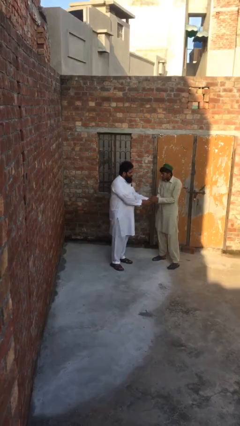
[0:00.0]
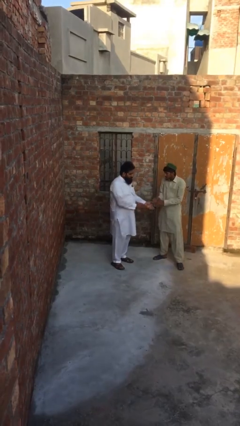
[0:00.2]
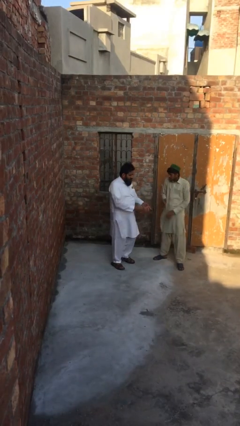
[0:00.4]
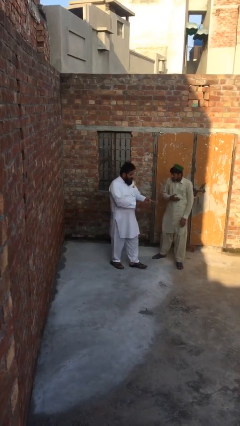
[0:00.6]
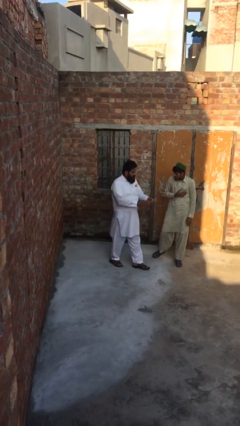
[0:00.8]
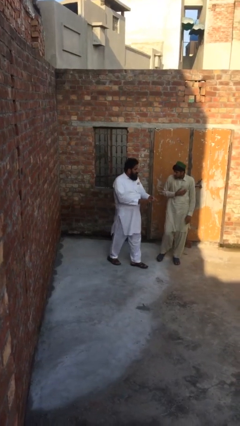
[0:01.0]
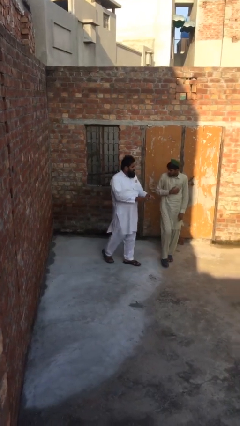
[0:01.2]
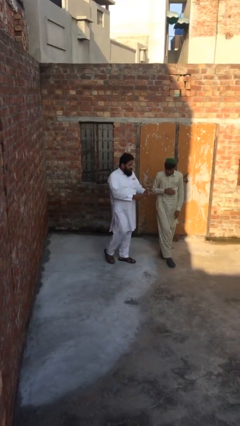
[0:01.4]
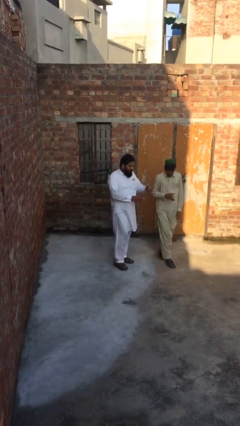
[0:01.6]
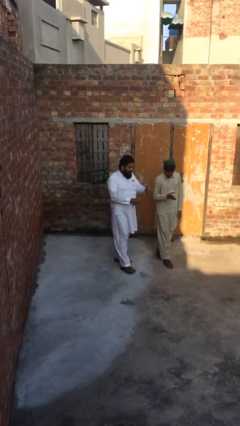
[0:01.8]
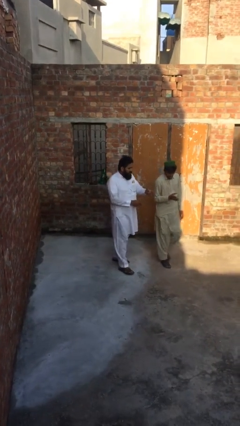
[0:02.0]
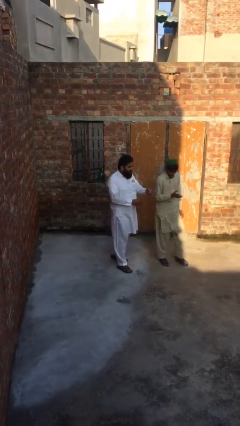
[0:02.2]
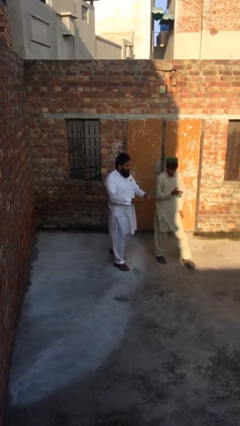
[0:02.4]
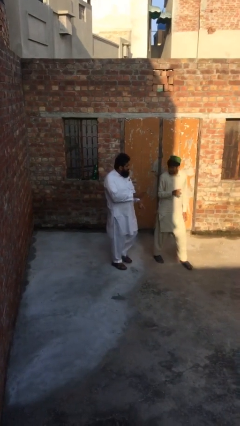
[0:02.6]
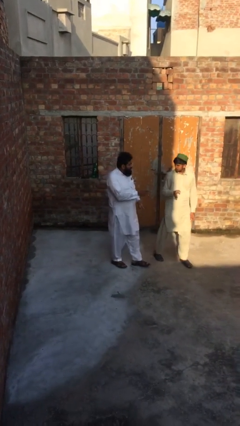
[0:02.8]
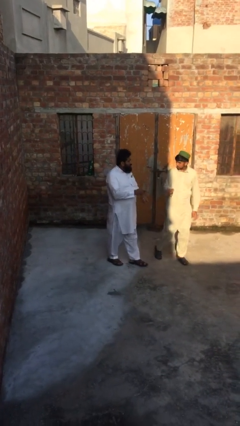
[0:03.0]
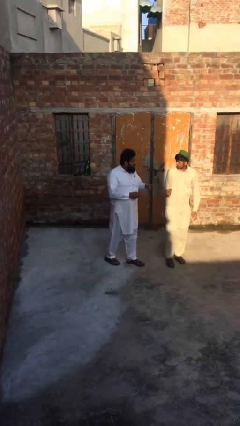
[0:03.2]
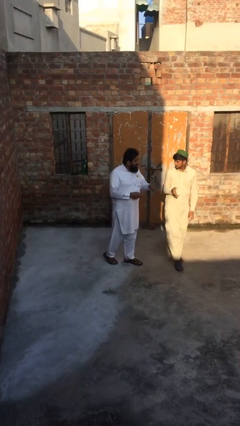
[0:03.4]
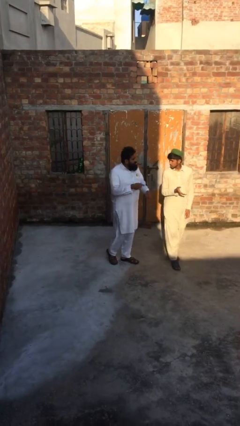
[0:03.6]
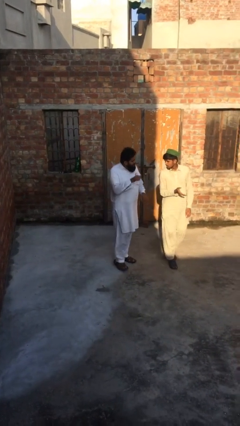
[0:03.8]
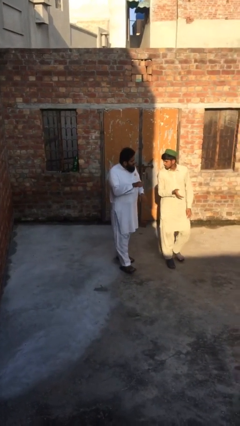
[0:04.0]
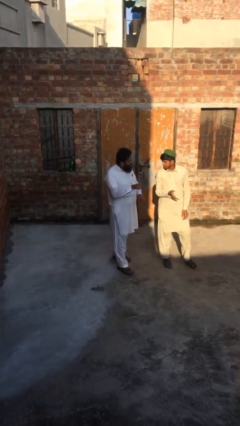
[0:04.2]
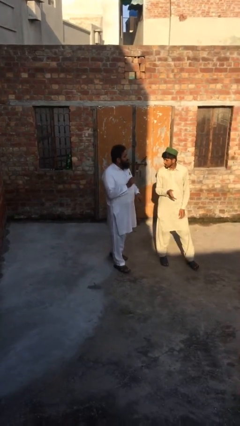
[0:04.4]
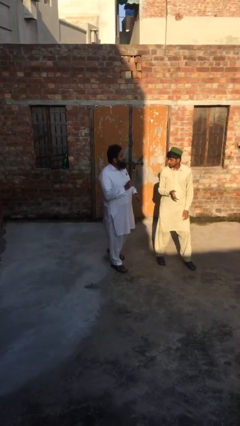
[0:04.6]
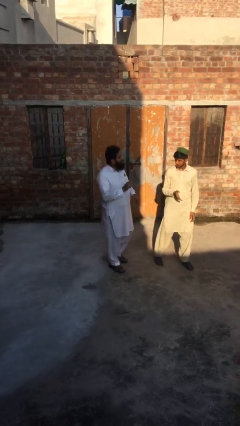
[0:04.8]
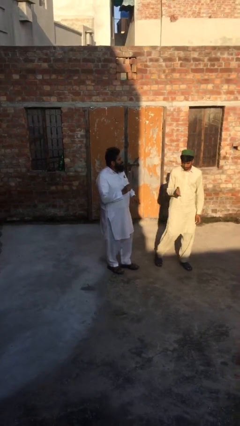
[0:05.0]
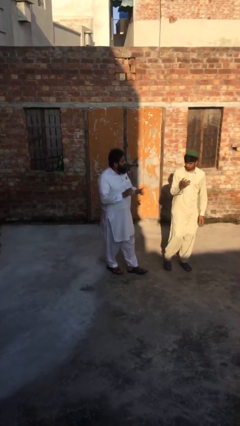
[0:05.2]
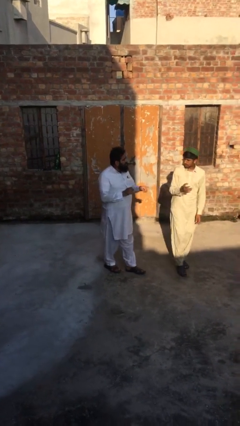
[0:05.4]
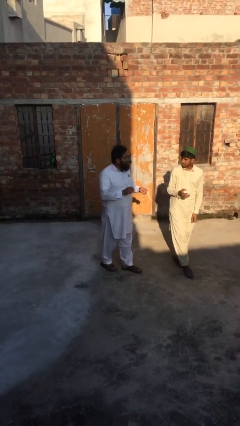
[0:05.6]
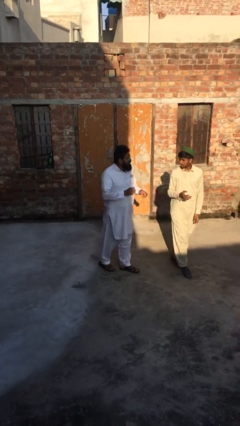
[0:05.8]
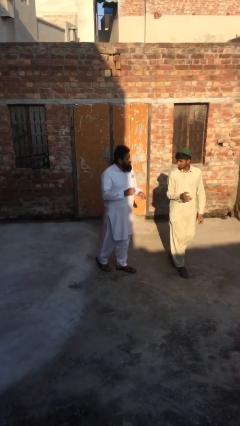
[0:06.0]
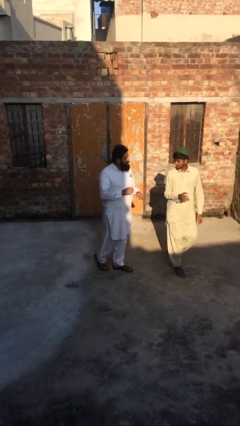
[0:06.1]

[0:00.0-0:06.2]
person talks to person

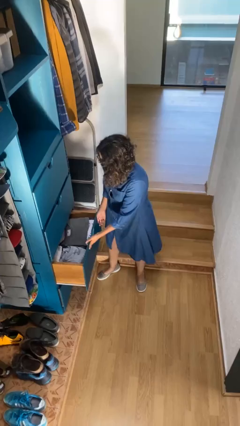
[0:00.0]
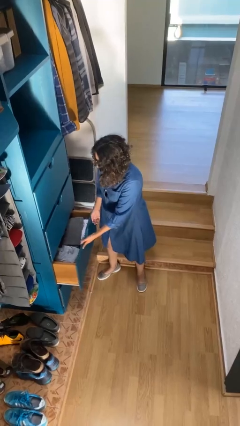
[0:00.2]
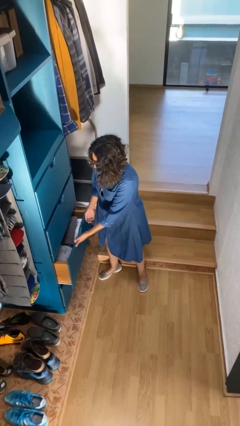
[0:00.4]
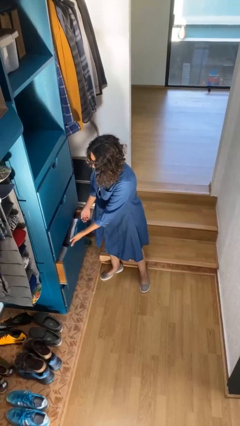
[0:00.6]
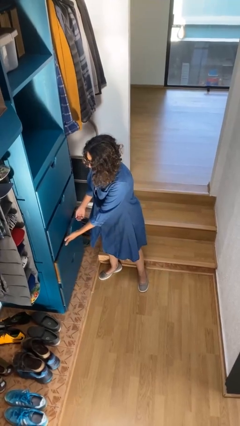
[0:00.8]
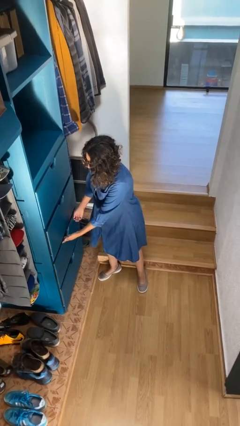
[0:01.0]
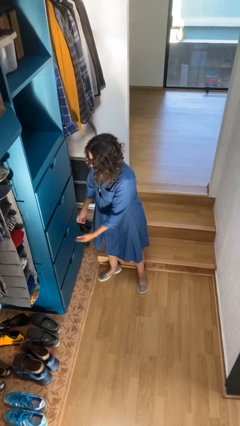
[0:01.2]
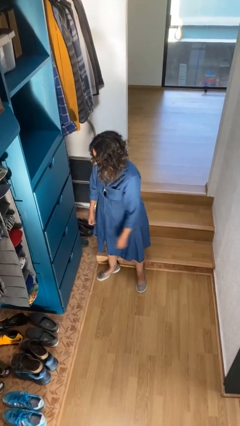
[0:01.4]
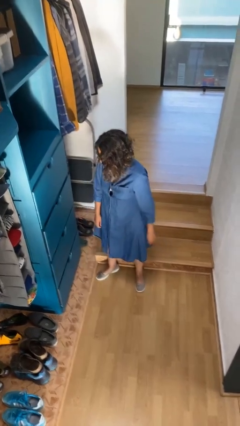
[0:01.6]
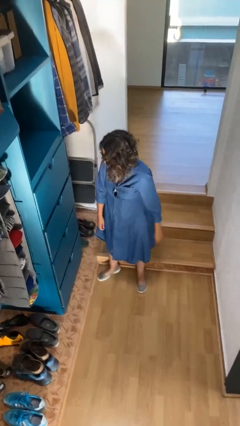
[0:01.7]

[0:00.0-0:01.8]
person closes dresser drawer

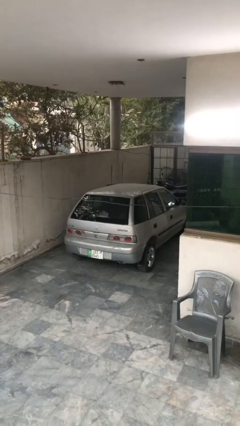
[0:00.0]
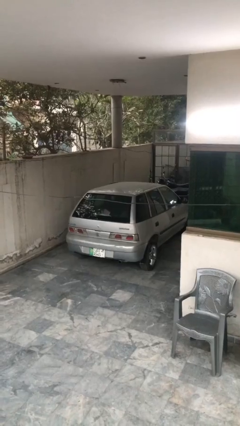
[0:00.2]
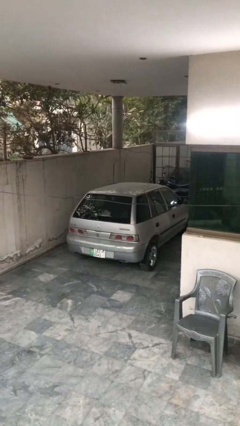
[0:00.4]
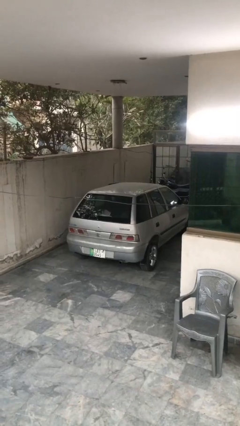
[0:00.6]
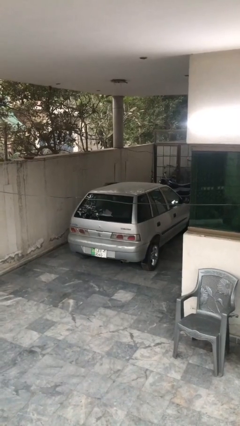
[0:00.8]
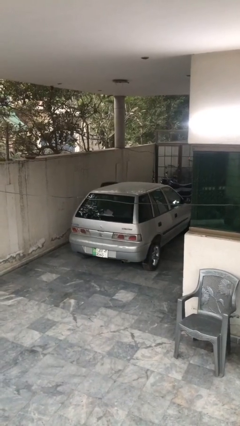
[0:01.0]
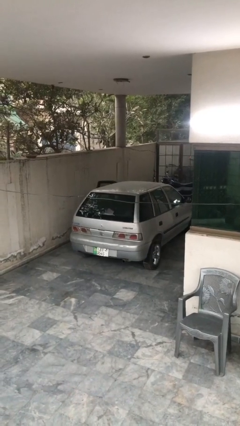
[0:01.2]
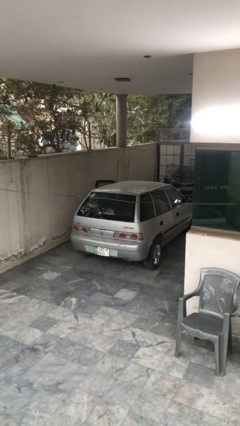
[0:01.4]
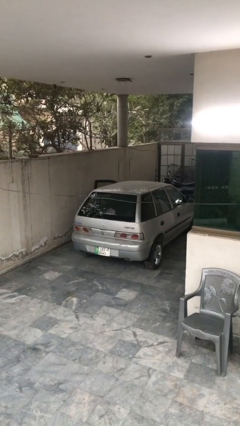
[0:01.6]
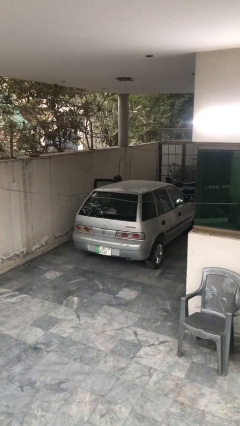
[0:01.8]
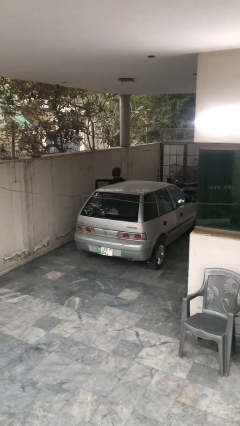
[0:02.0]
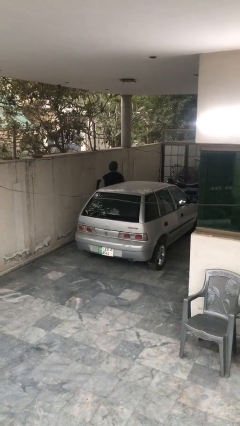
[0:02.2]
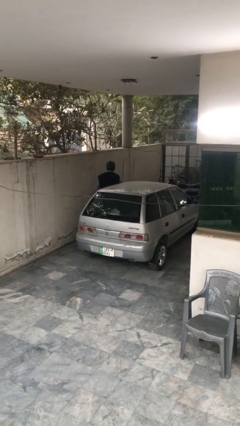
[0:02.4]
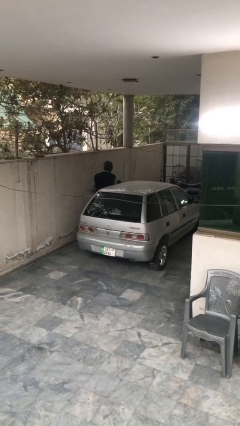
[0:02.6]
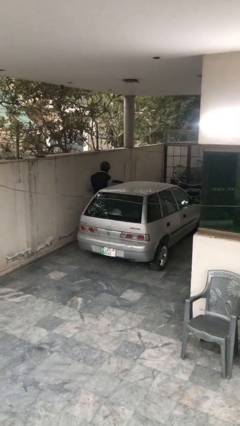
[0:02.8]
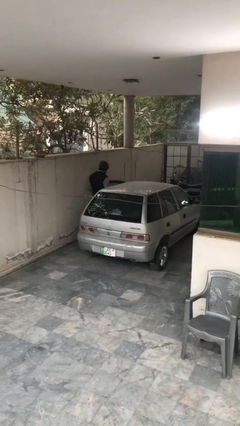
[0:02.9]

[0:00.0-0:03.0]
car drops off person

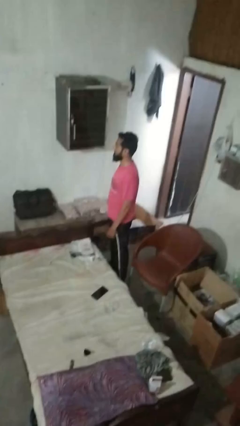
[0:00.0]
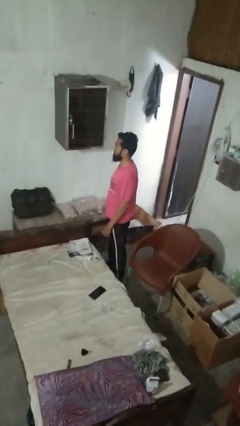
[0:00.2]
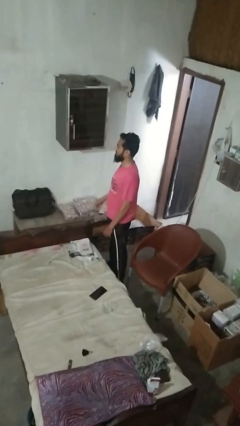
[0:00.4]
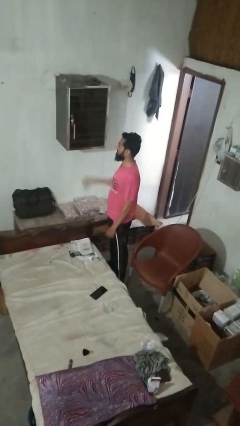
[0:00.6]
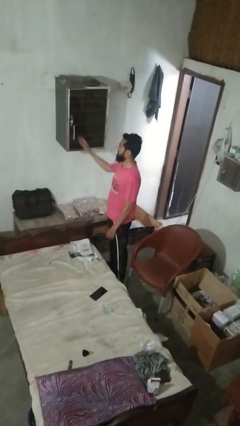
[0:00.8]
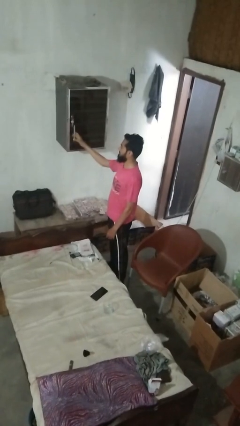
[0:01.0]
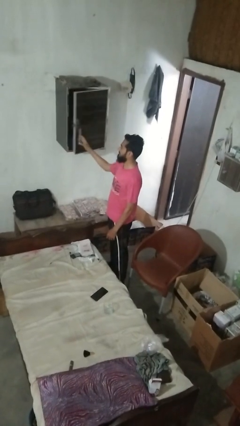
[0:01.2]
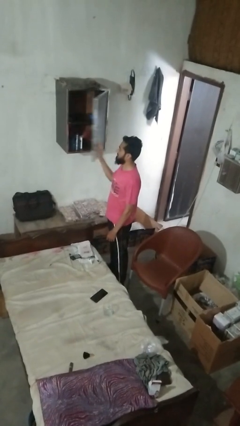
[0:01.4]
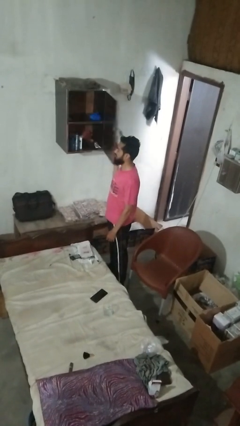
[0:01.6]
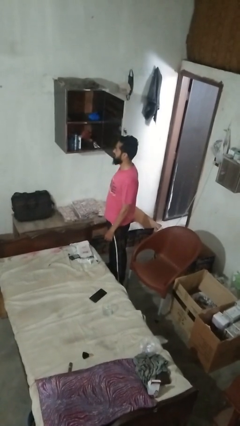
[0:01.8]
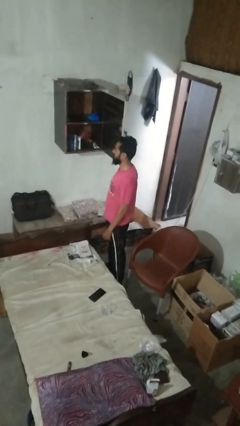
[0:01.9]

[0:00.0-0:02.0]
person opens closet door

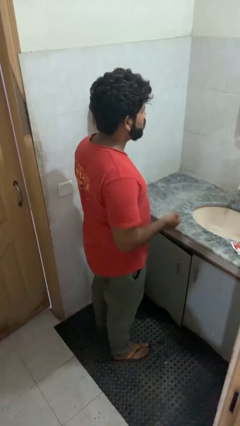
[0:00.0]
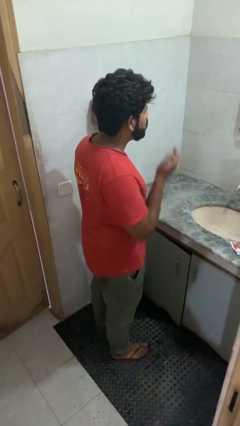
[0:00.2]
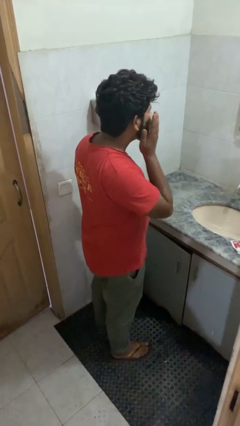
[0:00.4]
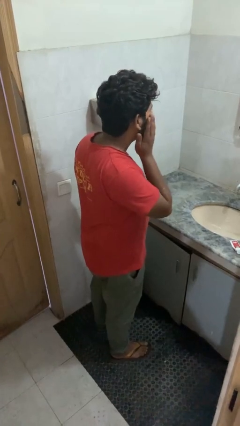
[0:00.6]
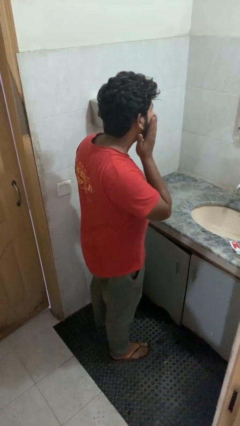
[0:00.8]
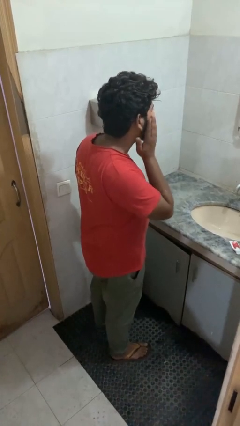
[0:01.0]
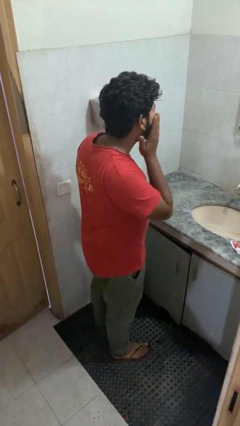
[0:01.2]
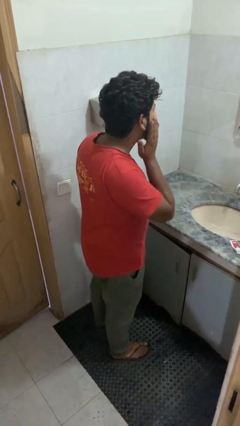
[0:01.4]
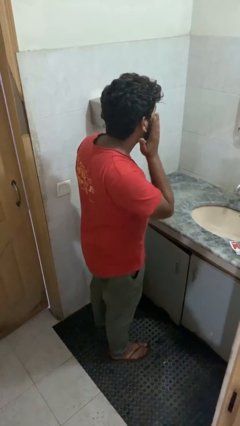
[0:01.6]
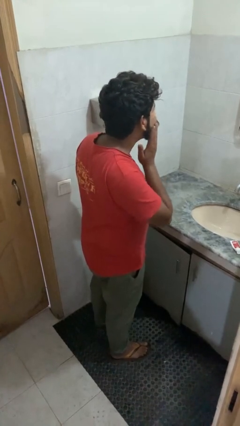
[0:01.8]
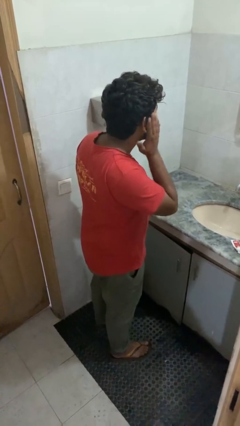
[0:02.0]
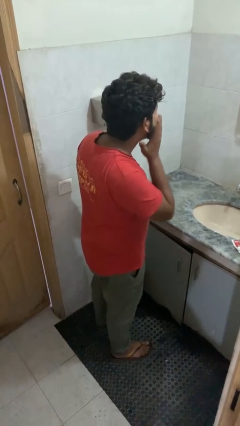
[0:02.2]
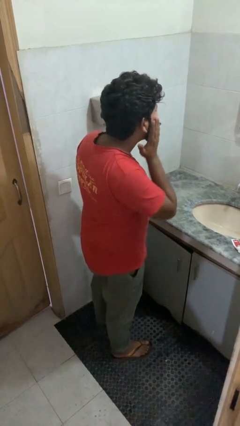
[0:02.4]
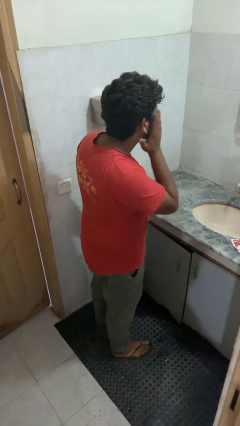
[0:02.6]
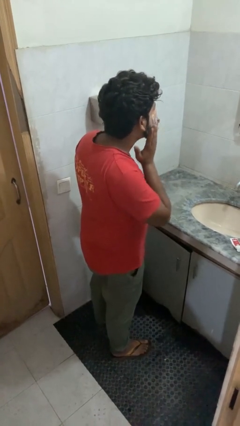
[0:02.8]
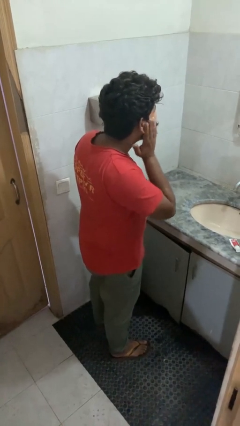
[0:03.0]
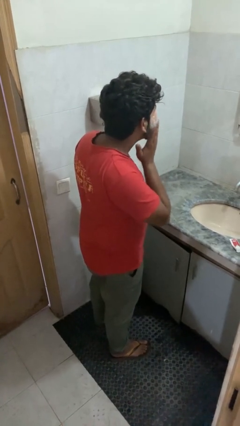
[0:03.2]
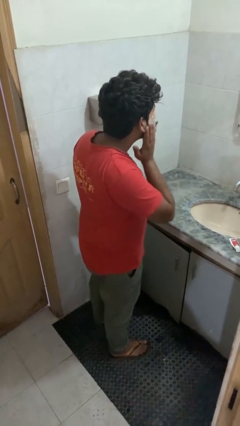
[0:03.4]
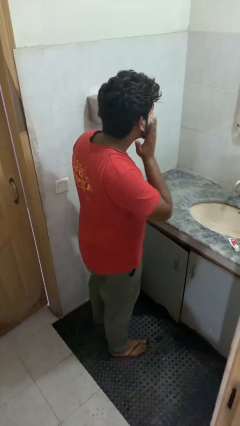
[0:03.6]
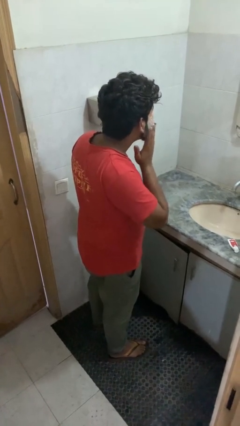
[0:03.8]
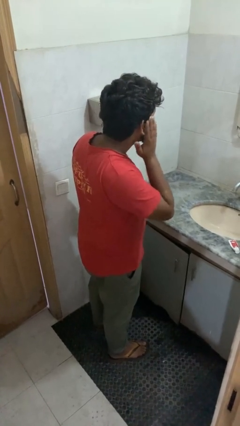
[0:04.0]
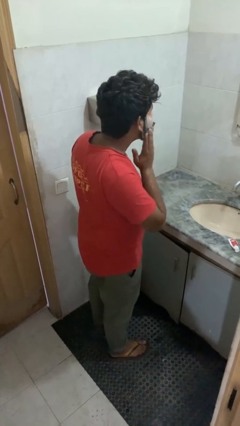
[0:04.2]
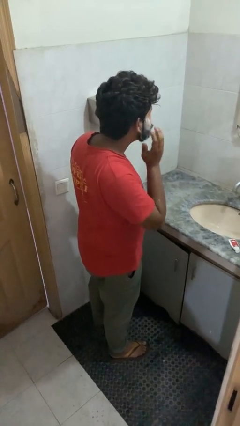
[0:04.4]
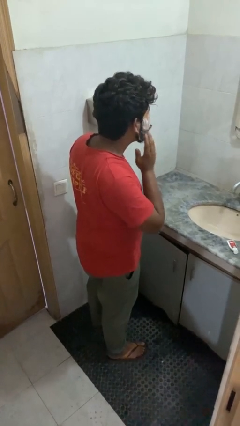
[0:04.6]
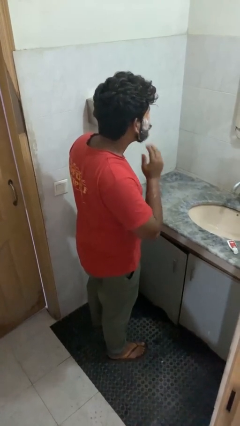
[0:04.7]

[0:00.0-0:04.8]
person applies shaving cream
